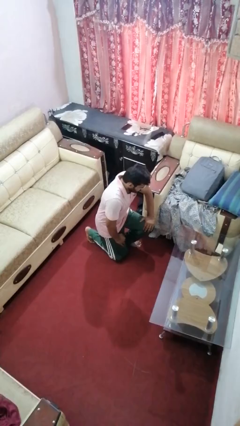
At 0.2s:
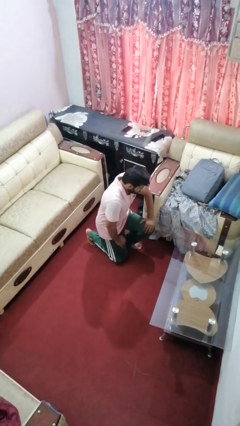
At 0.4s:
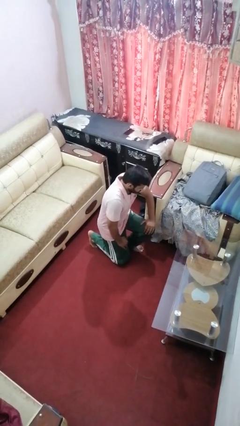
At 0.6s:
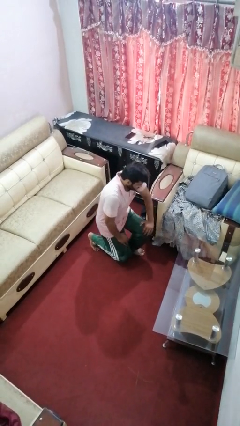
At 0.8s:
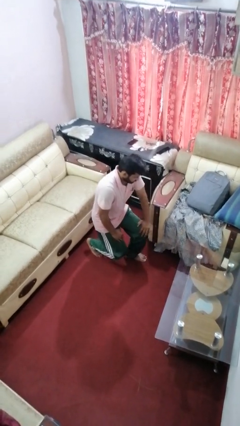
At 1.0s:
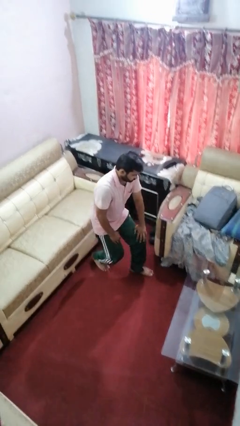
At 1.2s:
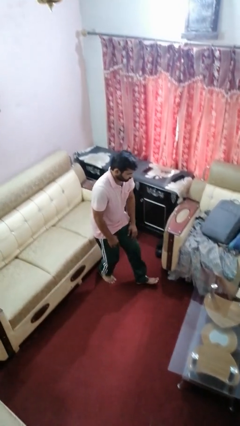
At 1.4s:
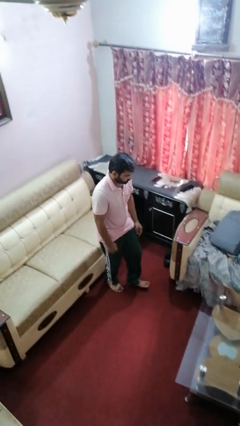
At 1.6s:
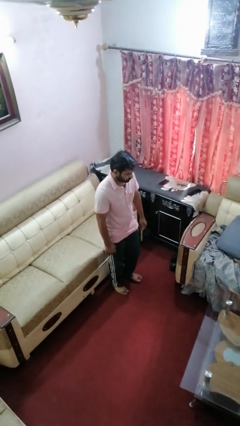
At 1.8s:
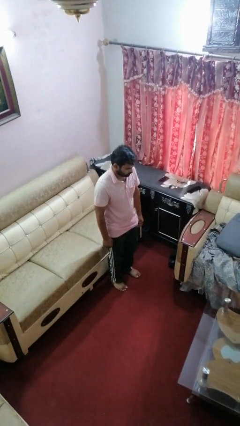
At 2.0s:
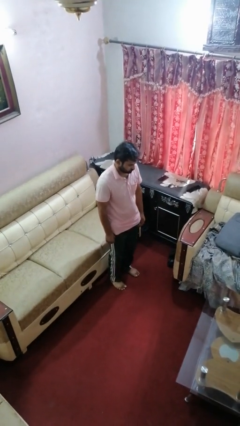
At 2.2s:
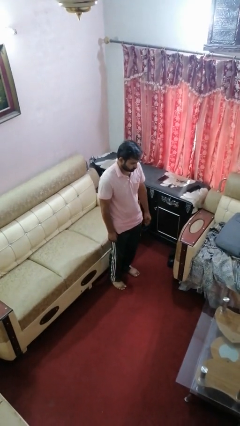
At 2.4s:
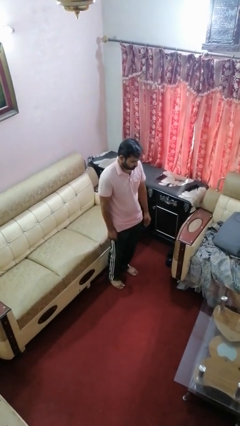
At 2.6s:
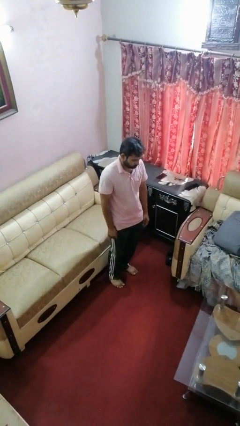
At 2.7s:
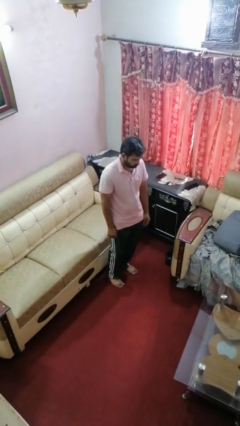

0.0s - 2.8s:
person stands up from floor

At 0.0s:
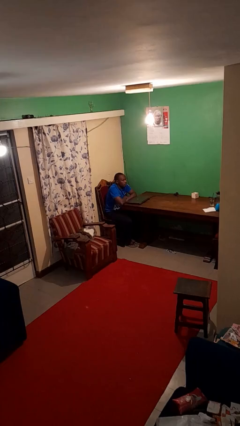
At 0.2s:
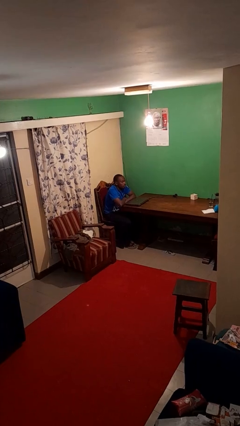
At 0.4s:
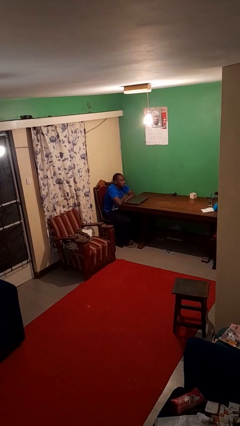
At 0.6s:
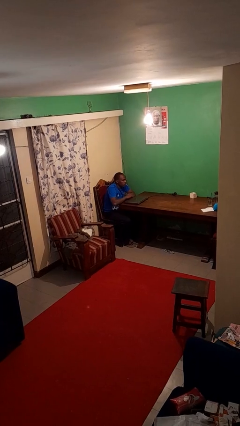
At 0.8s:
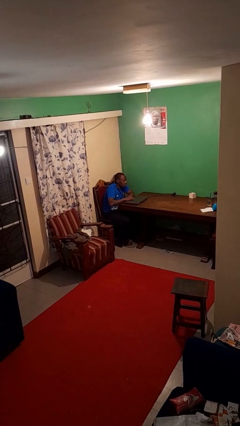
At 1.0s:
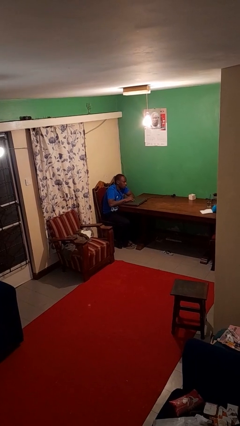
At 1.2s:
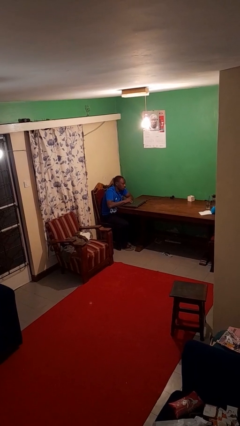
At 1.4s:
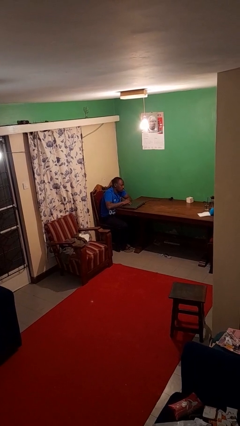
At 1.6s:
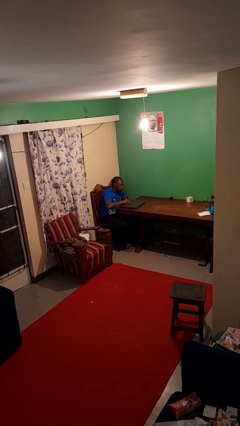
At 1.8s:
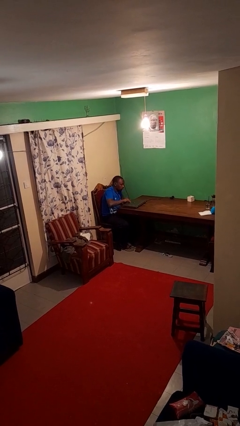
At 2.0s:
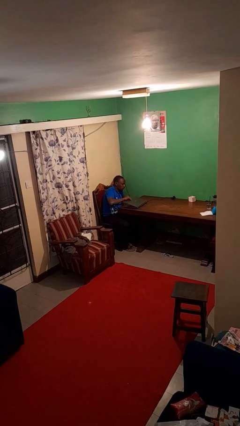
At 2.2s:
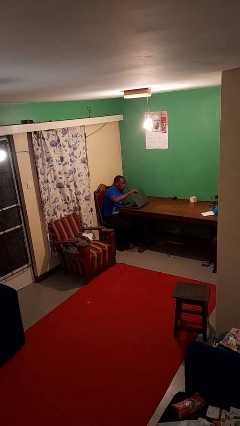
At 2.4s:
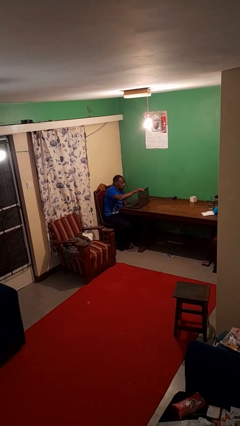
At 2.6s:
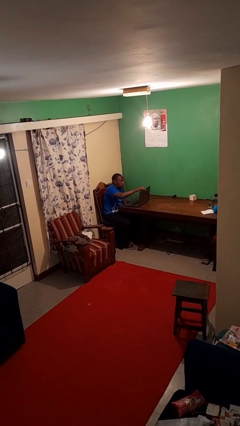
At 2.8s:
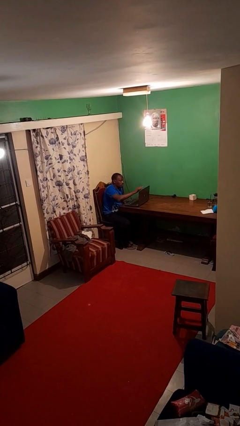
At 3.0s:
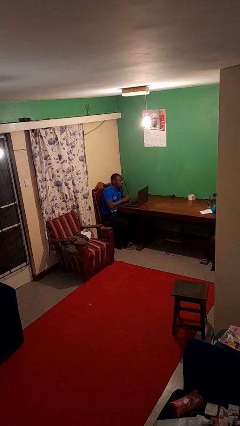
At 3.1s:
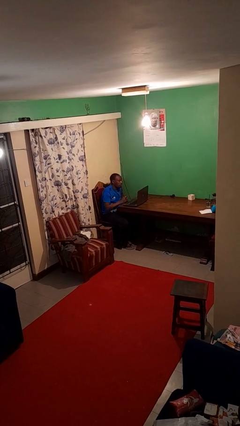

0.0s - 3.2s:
person opens laptop

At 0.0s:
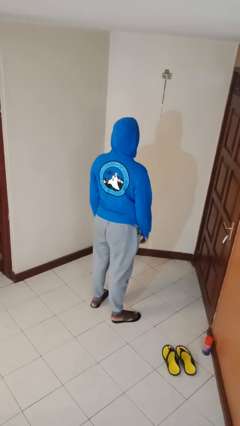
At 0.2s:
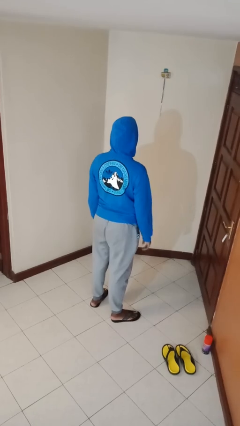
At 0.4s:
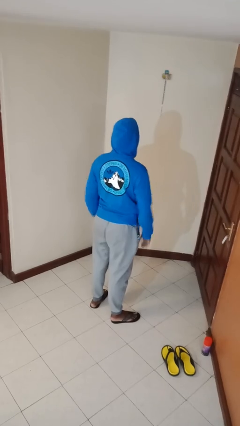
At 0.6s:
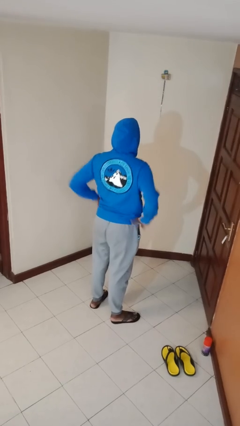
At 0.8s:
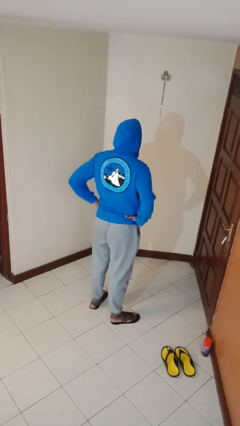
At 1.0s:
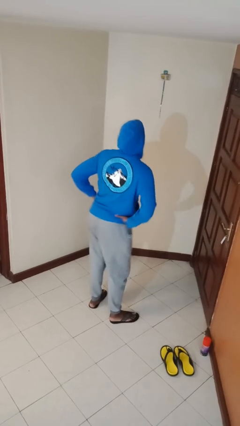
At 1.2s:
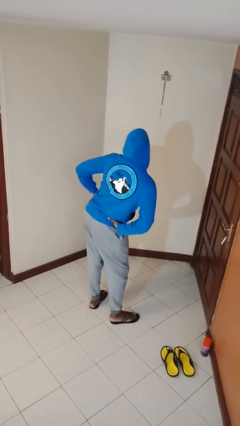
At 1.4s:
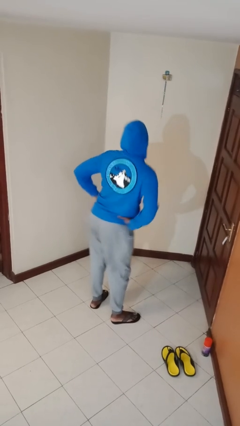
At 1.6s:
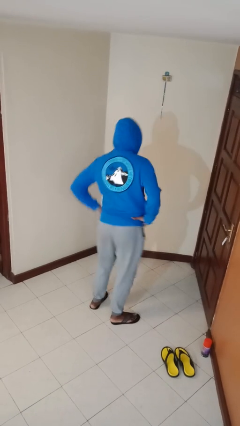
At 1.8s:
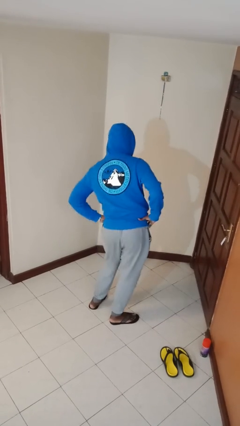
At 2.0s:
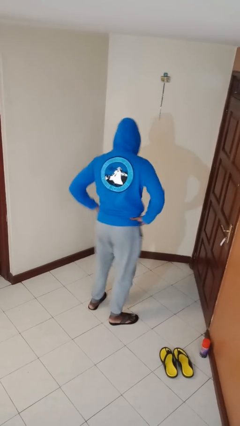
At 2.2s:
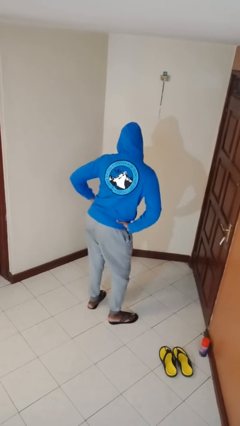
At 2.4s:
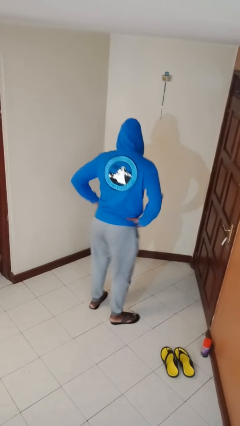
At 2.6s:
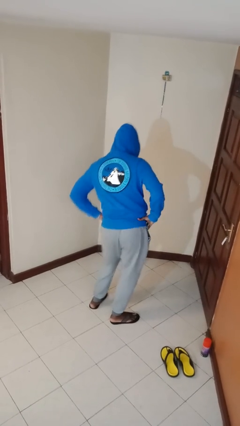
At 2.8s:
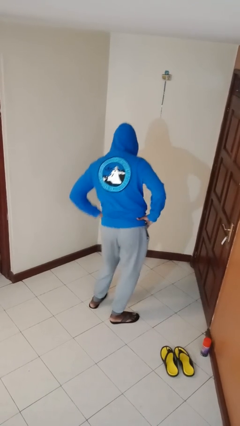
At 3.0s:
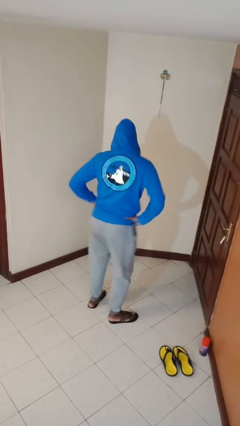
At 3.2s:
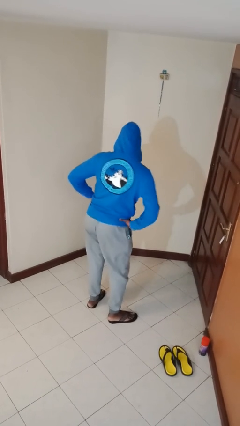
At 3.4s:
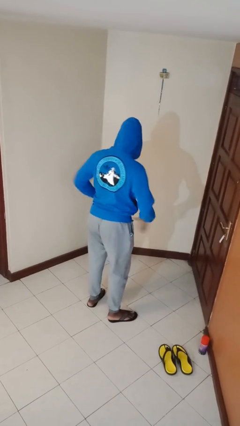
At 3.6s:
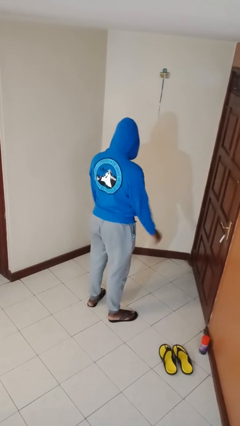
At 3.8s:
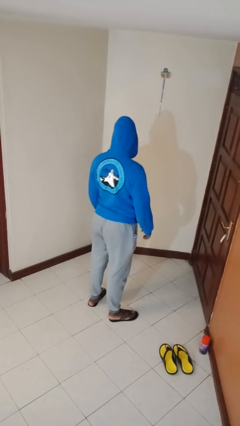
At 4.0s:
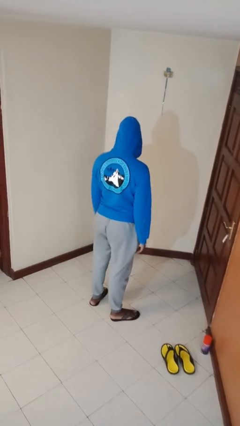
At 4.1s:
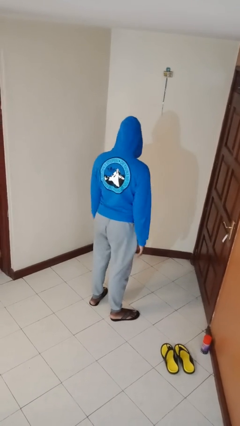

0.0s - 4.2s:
person wiggles hips

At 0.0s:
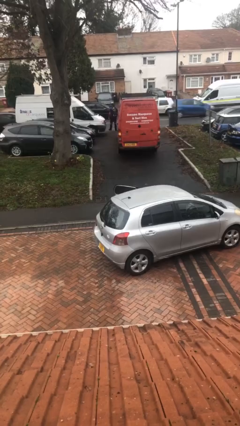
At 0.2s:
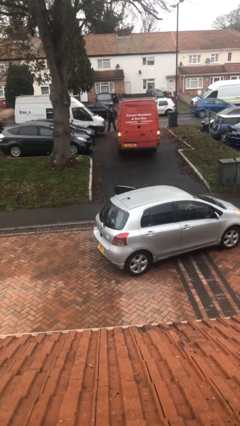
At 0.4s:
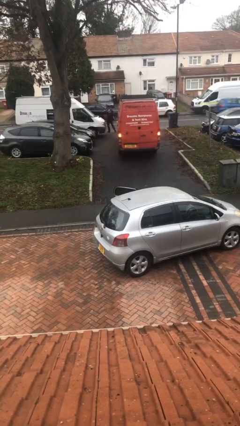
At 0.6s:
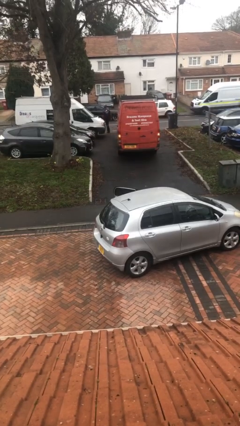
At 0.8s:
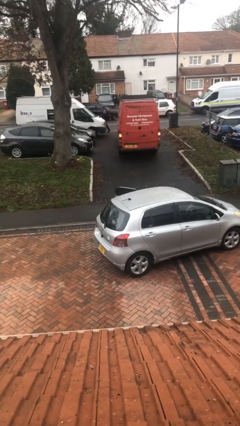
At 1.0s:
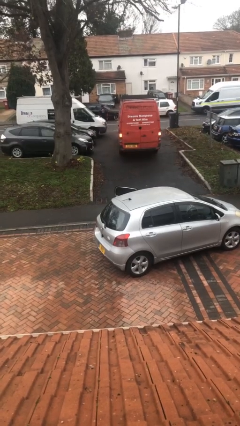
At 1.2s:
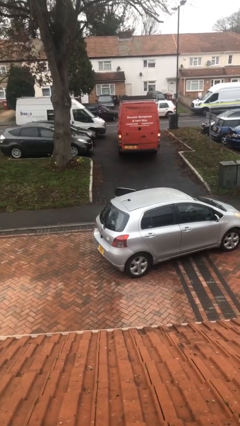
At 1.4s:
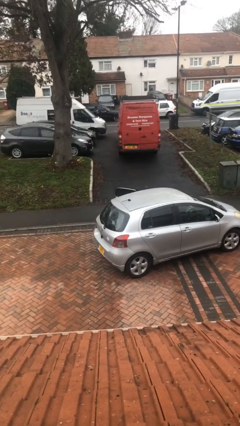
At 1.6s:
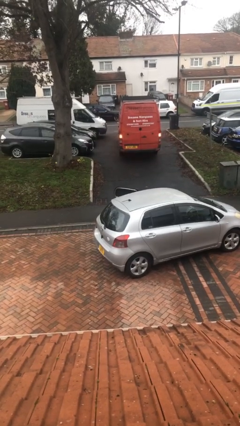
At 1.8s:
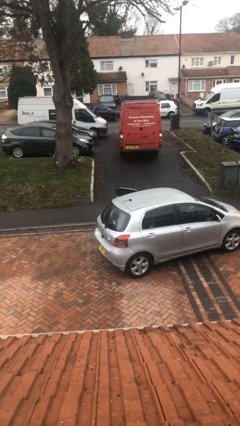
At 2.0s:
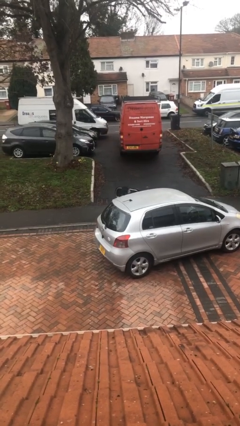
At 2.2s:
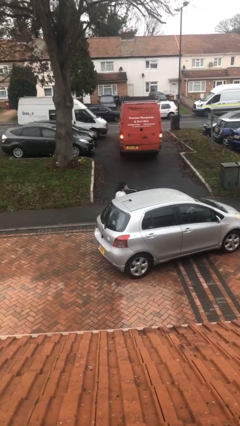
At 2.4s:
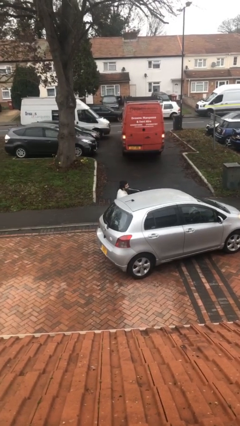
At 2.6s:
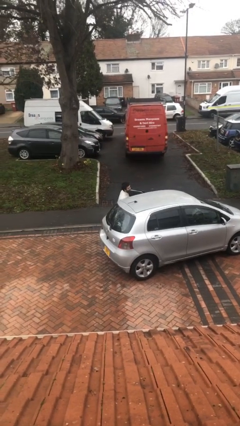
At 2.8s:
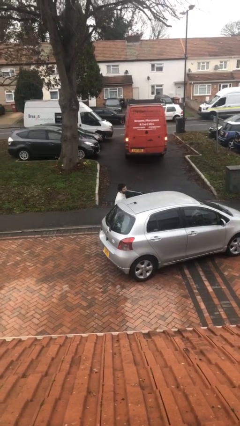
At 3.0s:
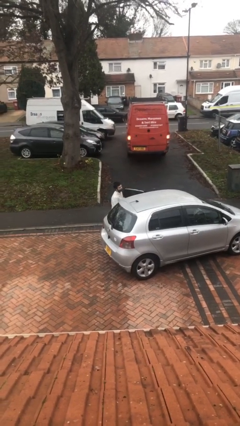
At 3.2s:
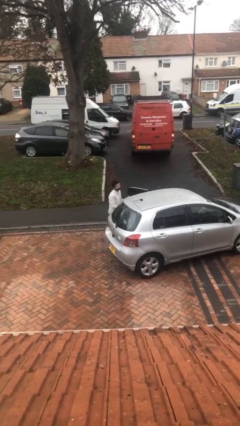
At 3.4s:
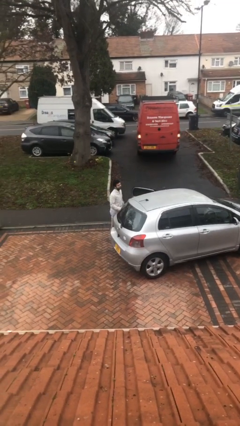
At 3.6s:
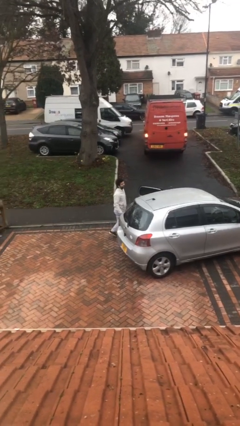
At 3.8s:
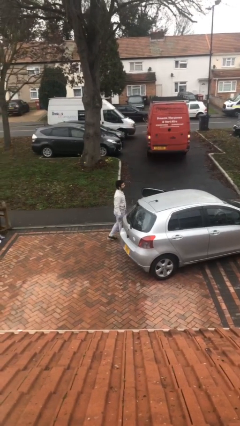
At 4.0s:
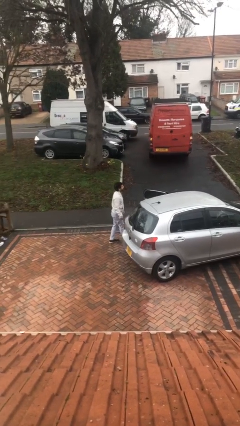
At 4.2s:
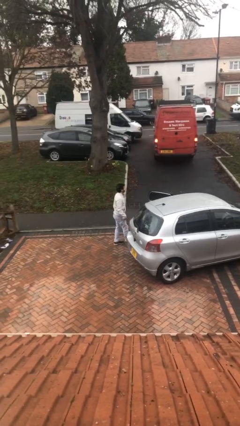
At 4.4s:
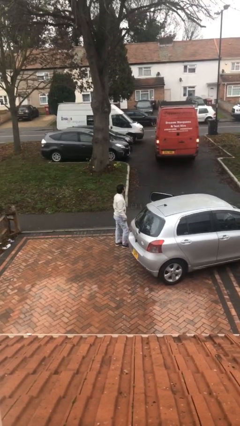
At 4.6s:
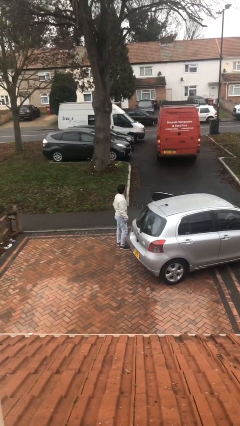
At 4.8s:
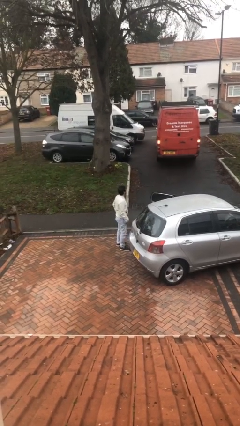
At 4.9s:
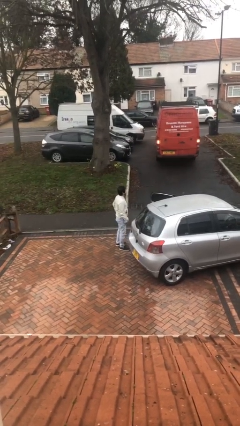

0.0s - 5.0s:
person exits car

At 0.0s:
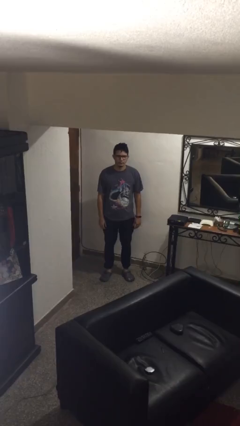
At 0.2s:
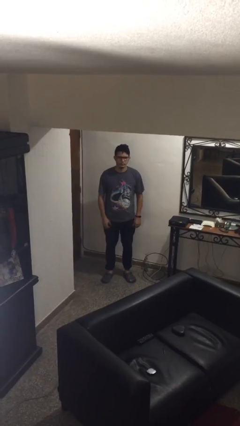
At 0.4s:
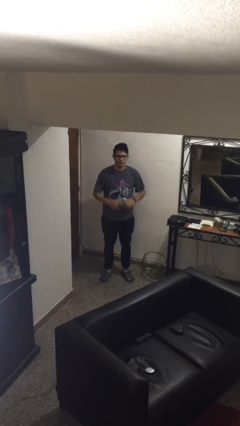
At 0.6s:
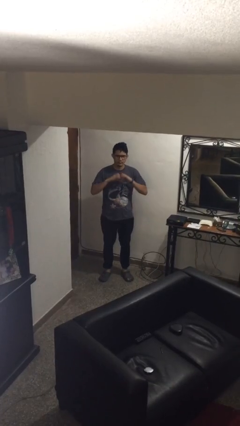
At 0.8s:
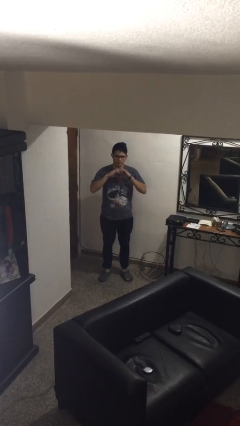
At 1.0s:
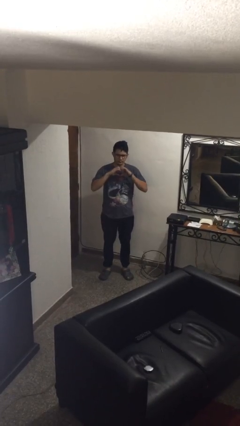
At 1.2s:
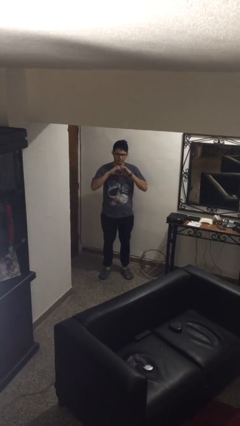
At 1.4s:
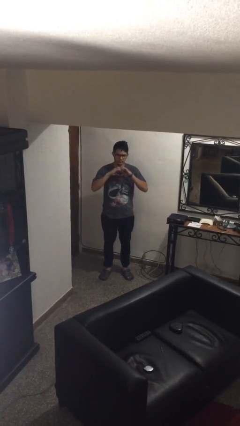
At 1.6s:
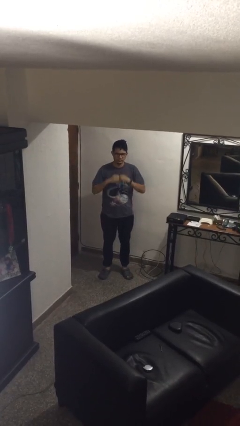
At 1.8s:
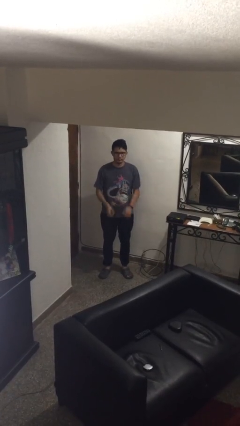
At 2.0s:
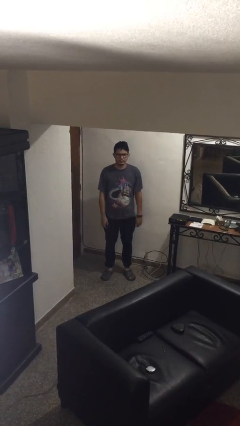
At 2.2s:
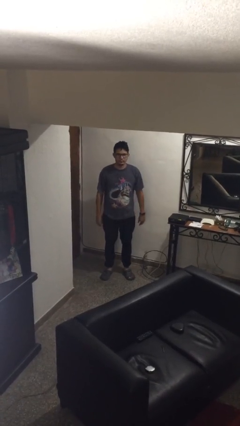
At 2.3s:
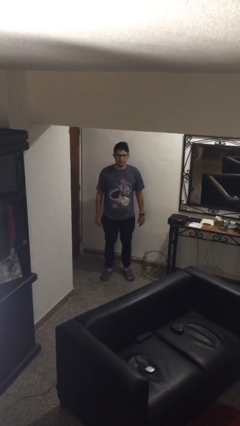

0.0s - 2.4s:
person gestures heart
